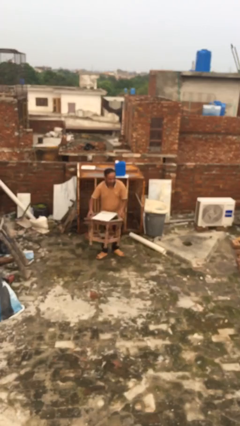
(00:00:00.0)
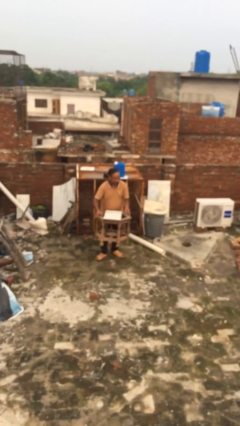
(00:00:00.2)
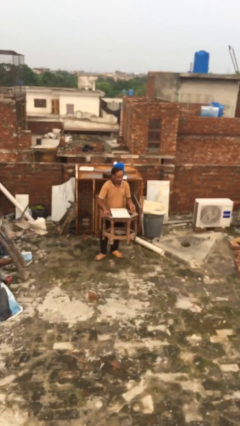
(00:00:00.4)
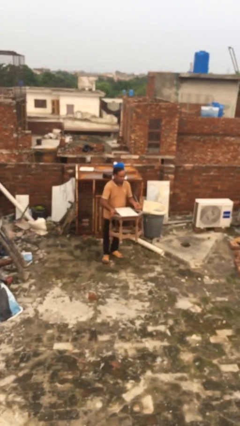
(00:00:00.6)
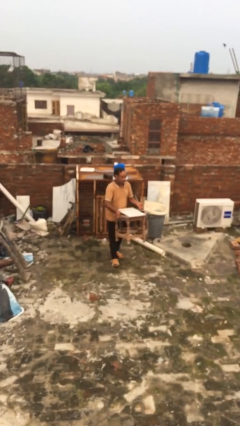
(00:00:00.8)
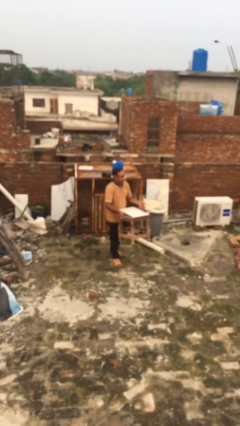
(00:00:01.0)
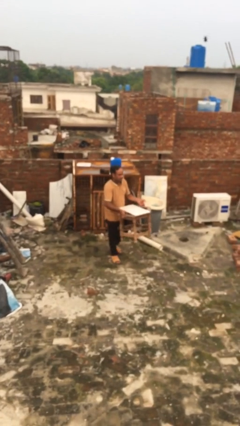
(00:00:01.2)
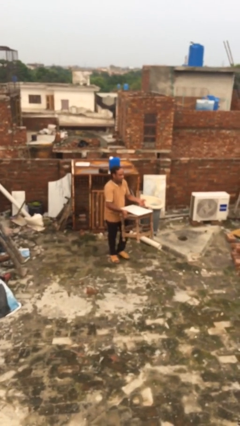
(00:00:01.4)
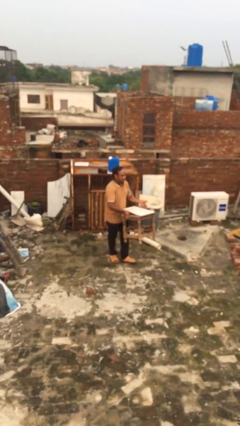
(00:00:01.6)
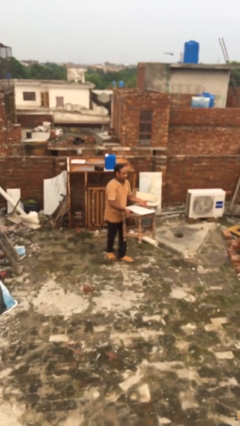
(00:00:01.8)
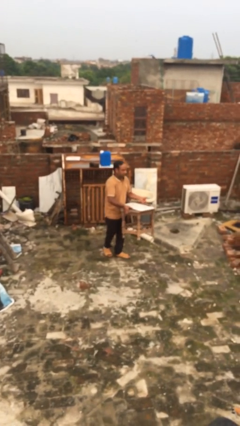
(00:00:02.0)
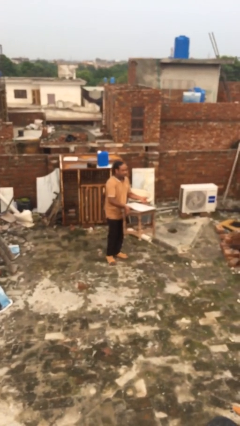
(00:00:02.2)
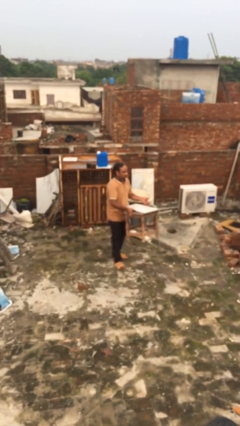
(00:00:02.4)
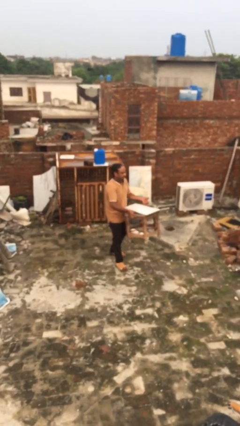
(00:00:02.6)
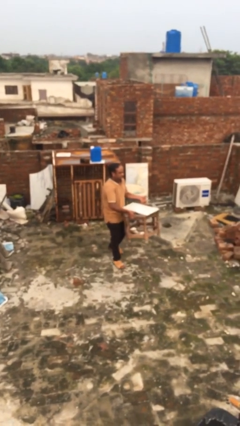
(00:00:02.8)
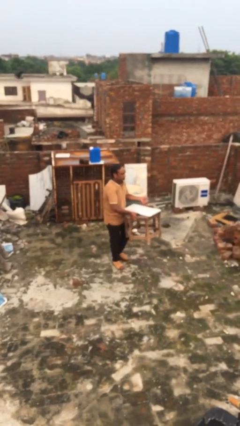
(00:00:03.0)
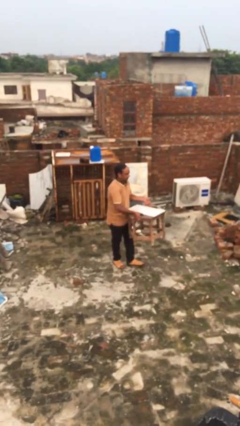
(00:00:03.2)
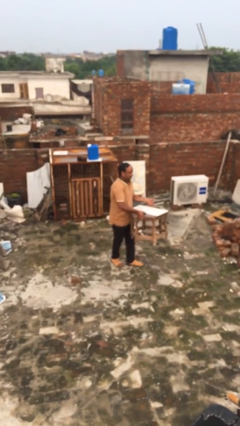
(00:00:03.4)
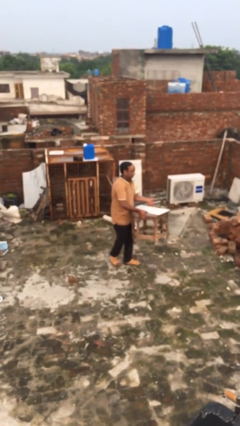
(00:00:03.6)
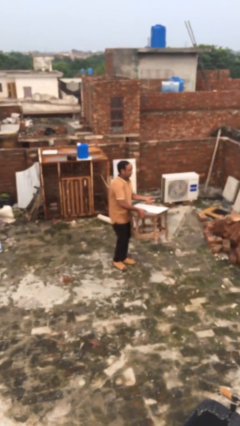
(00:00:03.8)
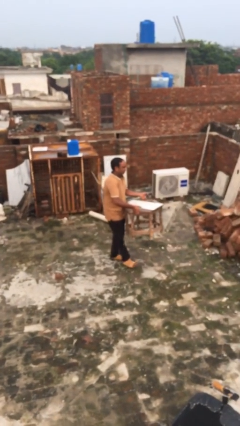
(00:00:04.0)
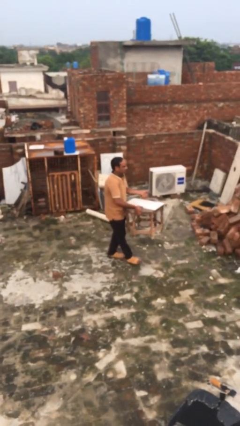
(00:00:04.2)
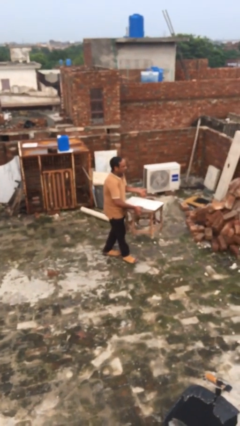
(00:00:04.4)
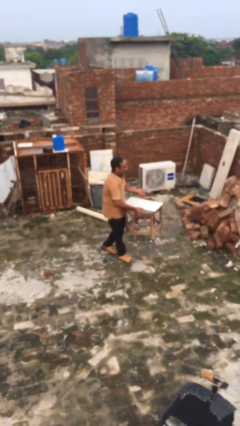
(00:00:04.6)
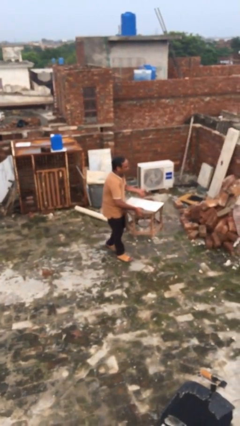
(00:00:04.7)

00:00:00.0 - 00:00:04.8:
person carries heavy object

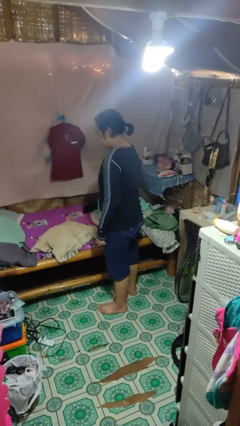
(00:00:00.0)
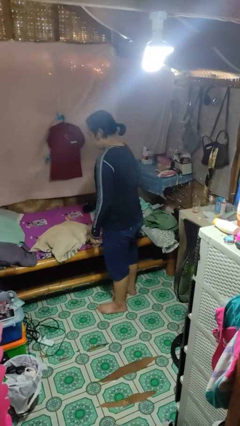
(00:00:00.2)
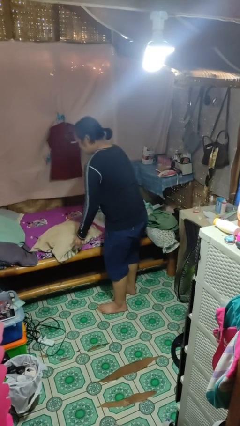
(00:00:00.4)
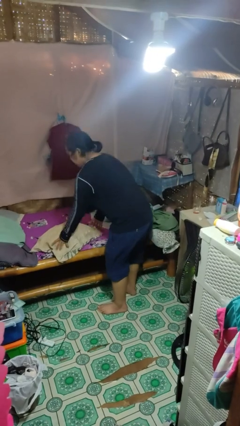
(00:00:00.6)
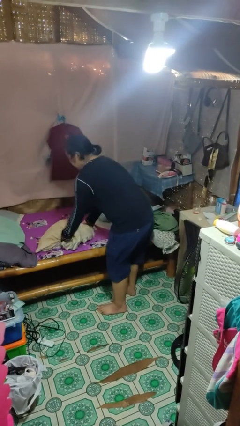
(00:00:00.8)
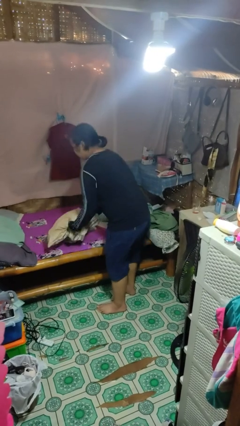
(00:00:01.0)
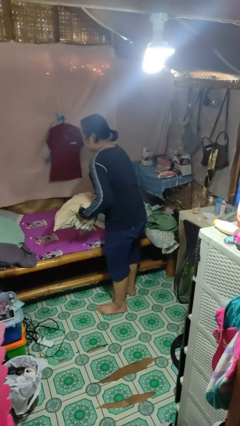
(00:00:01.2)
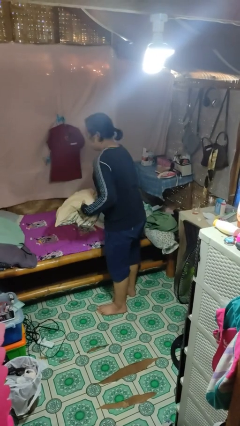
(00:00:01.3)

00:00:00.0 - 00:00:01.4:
person picks up object from bed

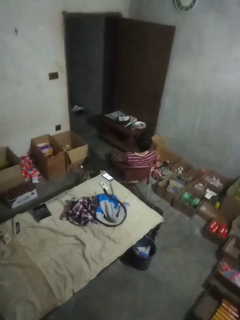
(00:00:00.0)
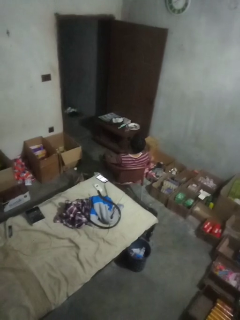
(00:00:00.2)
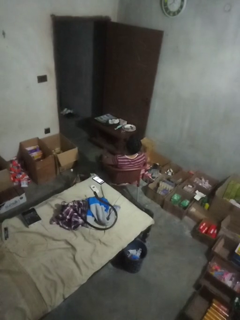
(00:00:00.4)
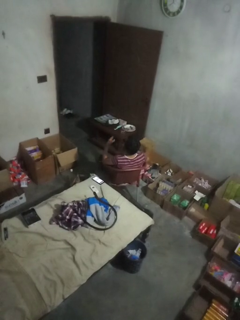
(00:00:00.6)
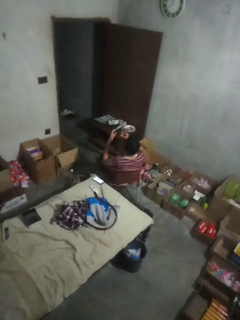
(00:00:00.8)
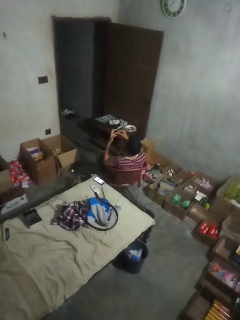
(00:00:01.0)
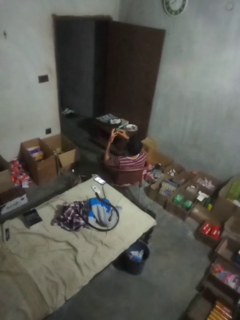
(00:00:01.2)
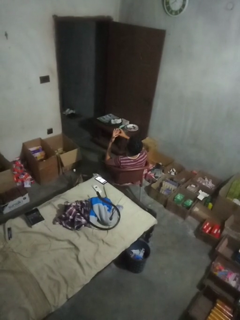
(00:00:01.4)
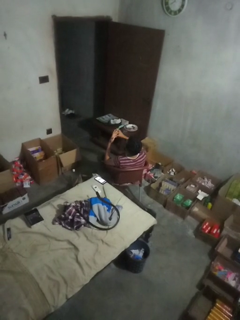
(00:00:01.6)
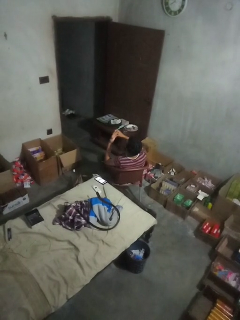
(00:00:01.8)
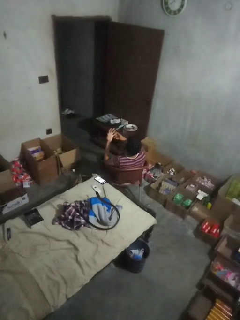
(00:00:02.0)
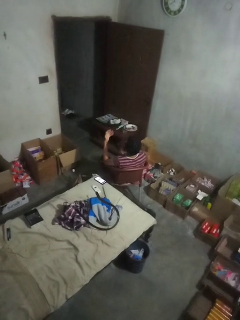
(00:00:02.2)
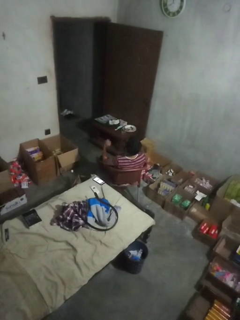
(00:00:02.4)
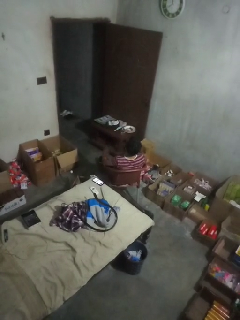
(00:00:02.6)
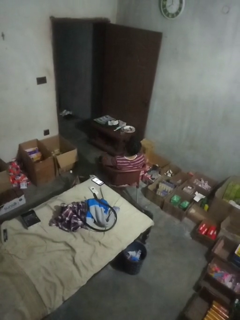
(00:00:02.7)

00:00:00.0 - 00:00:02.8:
person puts on ring

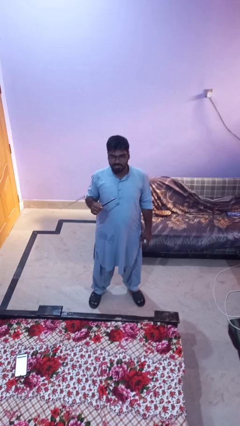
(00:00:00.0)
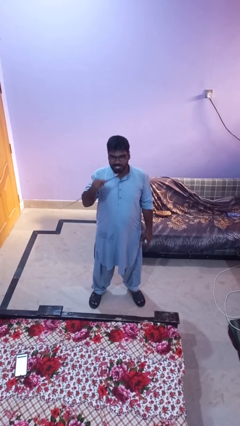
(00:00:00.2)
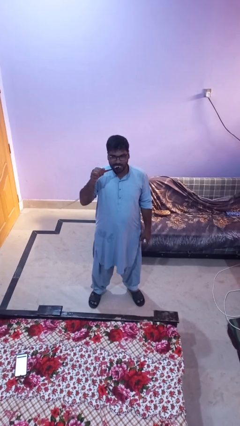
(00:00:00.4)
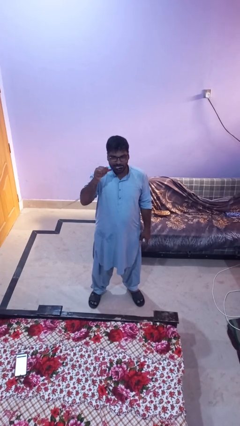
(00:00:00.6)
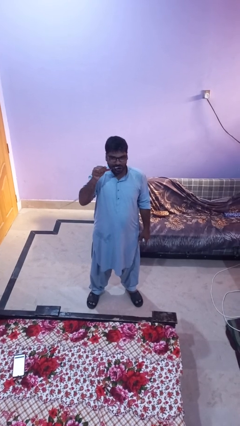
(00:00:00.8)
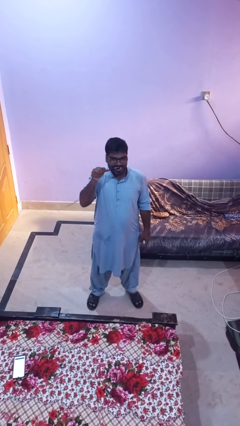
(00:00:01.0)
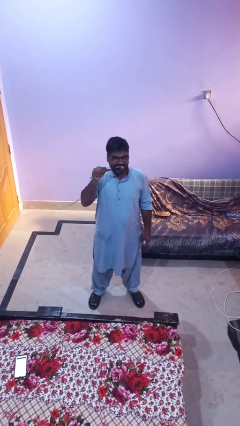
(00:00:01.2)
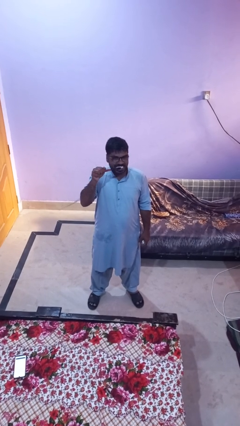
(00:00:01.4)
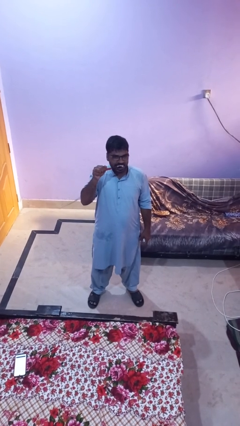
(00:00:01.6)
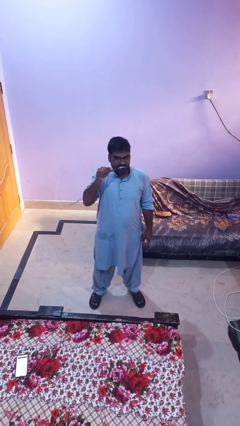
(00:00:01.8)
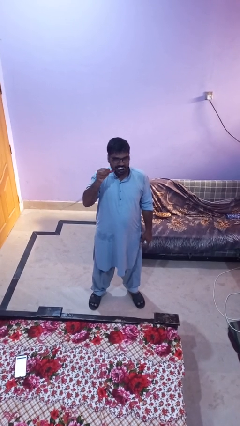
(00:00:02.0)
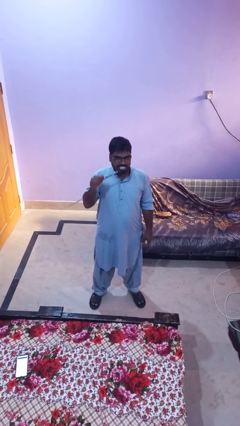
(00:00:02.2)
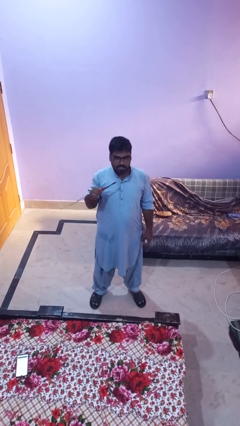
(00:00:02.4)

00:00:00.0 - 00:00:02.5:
person brushes teeth

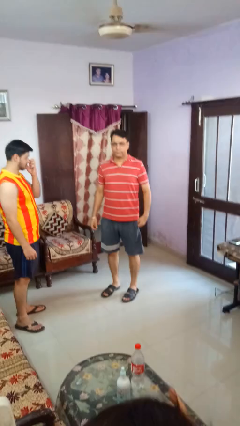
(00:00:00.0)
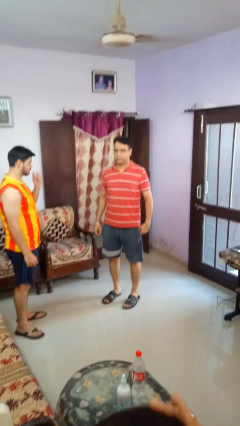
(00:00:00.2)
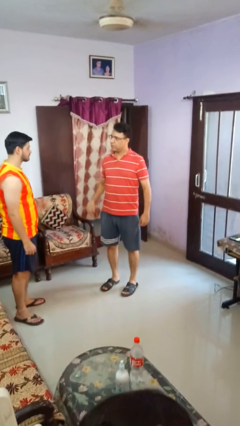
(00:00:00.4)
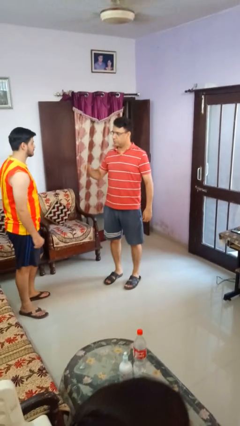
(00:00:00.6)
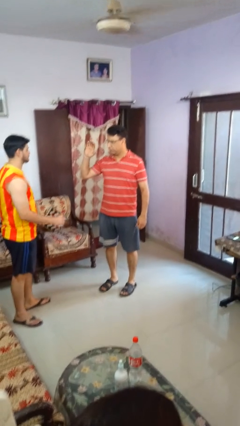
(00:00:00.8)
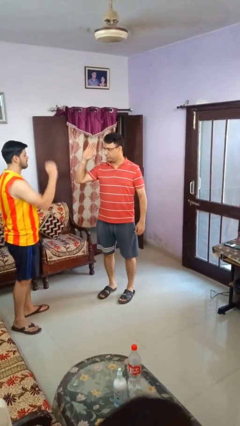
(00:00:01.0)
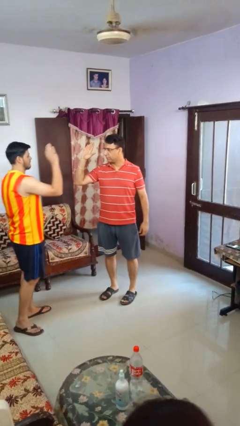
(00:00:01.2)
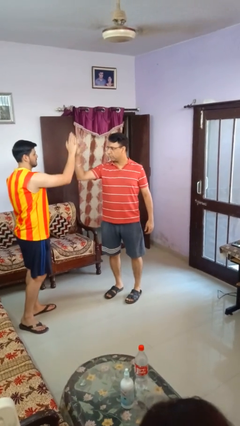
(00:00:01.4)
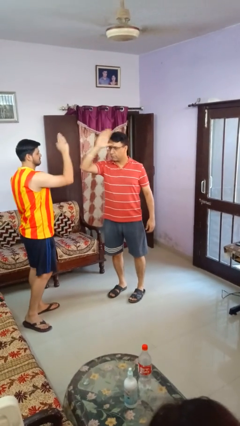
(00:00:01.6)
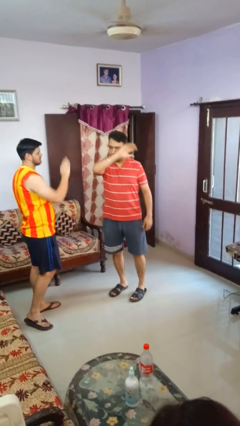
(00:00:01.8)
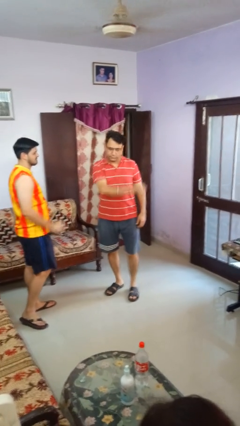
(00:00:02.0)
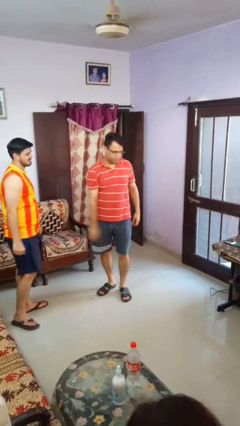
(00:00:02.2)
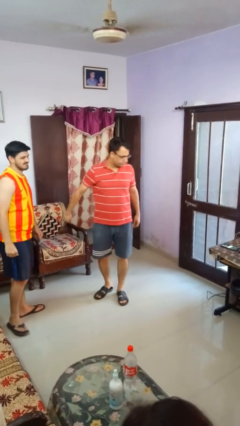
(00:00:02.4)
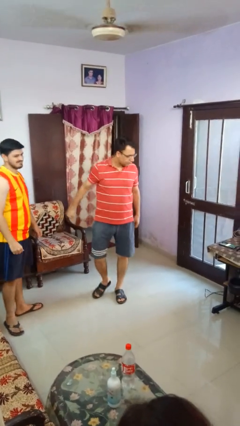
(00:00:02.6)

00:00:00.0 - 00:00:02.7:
person highfives hand

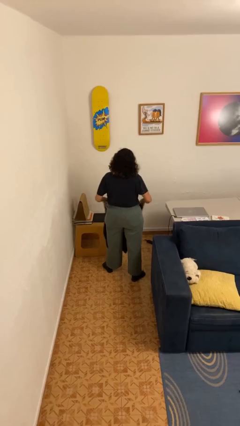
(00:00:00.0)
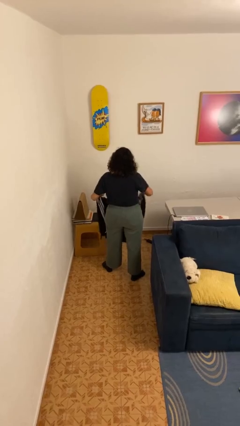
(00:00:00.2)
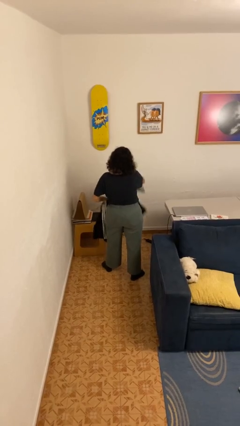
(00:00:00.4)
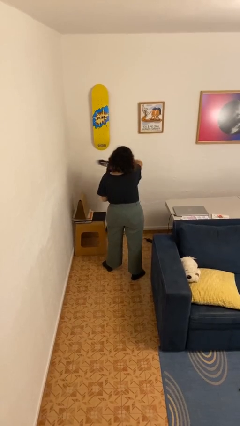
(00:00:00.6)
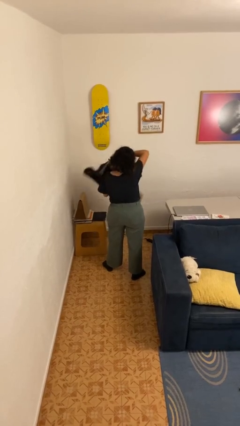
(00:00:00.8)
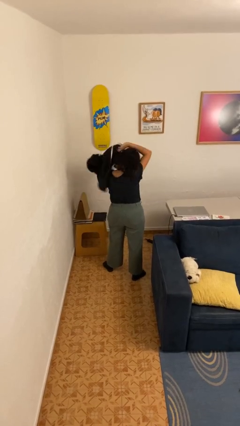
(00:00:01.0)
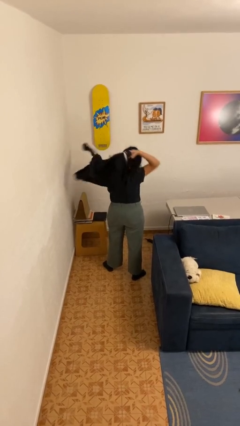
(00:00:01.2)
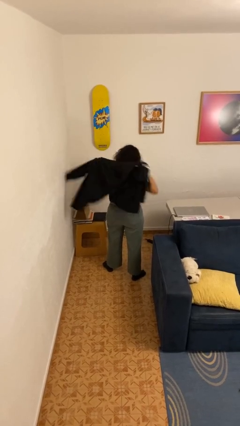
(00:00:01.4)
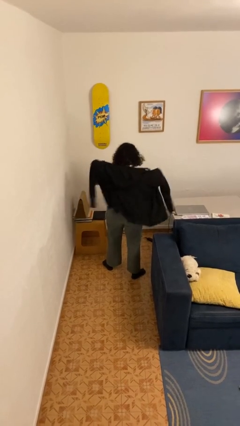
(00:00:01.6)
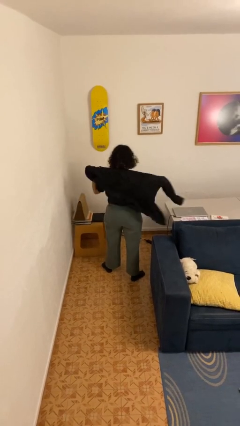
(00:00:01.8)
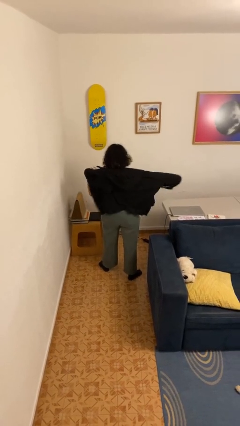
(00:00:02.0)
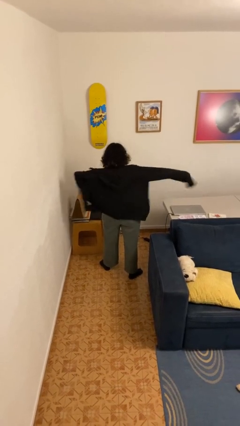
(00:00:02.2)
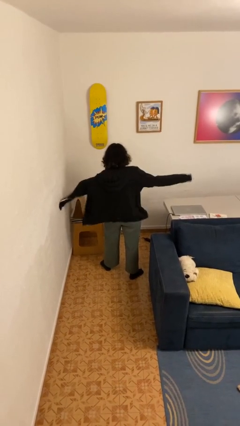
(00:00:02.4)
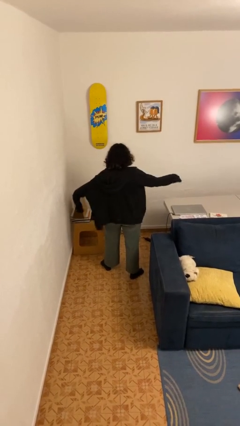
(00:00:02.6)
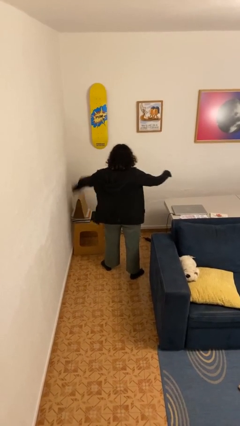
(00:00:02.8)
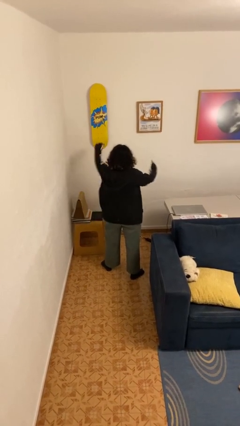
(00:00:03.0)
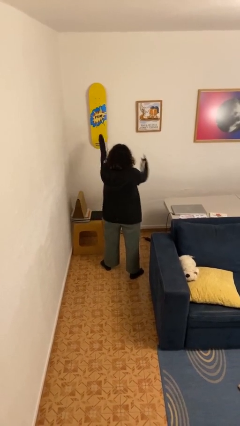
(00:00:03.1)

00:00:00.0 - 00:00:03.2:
person puts on hoodie

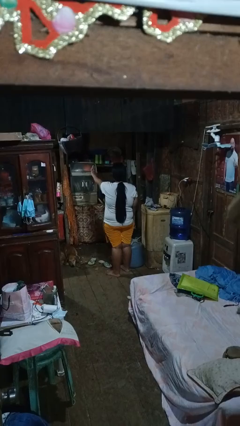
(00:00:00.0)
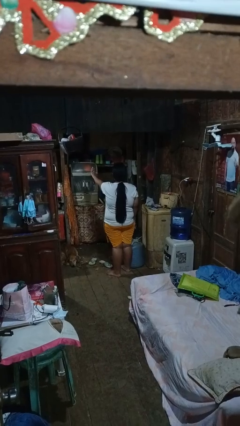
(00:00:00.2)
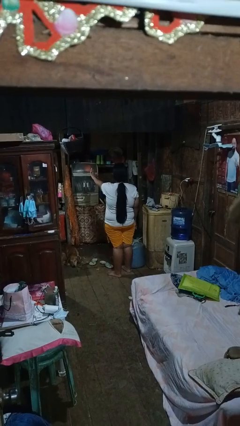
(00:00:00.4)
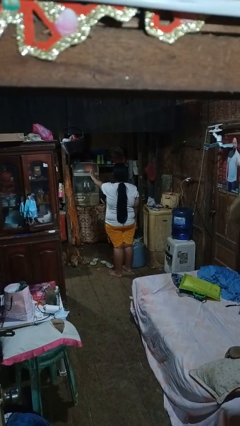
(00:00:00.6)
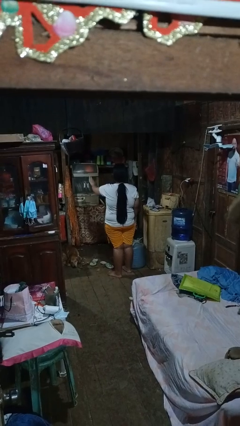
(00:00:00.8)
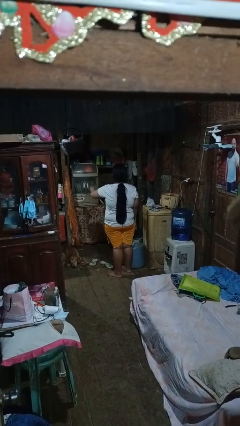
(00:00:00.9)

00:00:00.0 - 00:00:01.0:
person gestures stop
